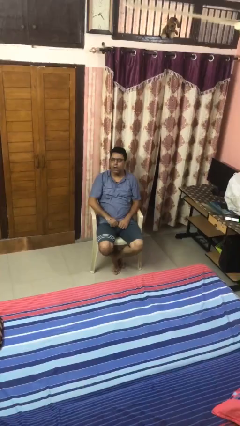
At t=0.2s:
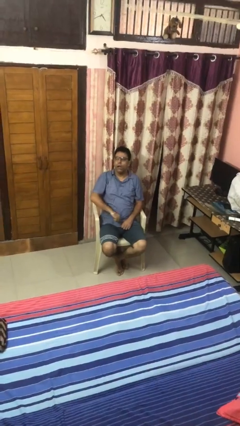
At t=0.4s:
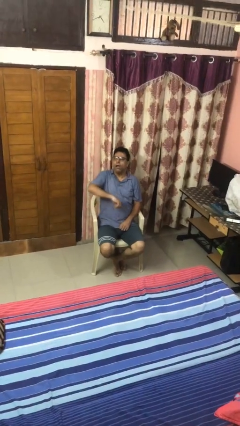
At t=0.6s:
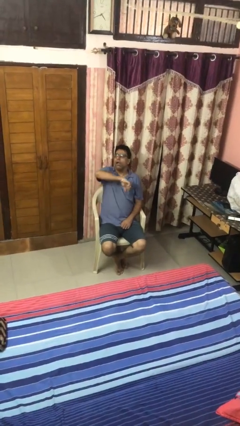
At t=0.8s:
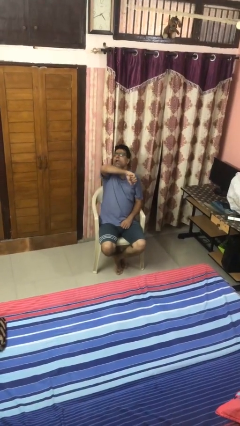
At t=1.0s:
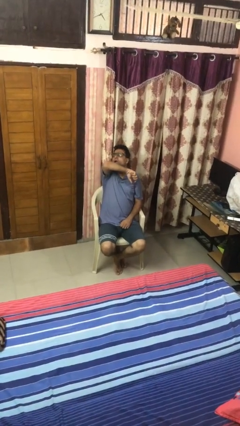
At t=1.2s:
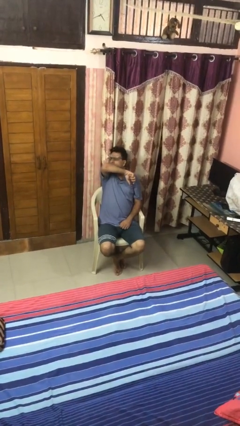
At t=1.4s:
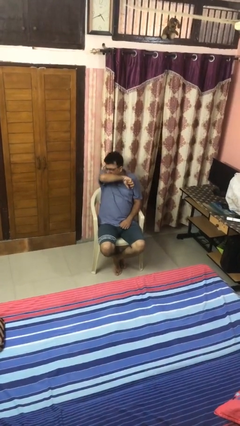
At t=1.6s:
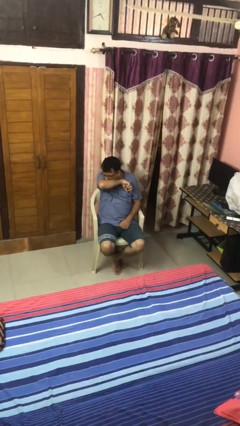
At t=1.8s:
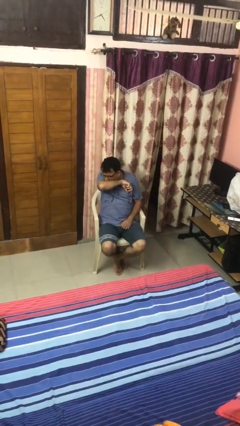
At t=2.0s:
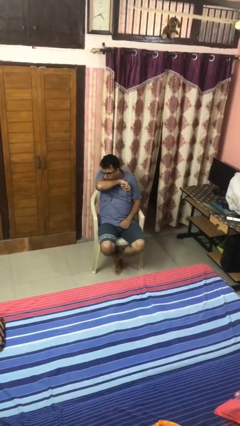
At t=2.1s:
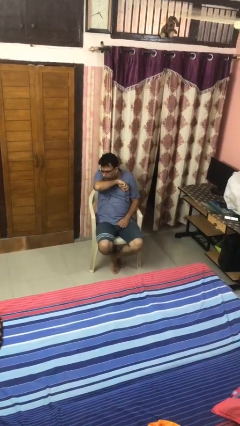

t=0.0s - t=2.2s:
person sneezes into arm

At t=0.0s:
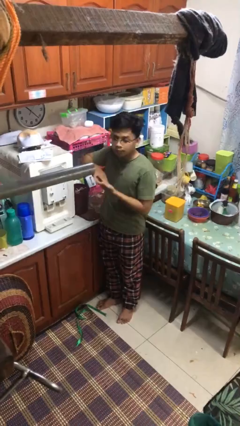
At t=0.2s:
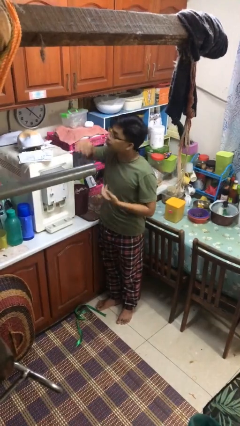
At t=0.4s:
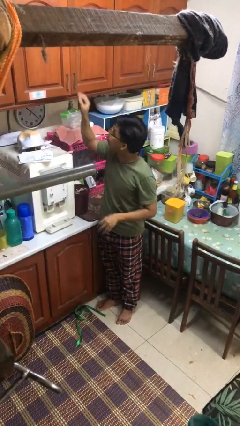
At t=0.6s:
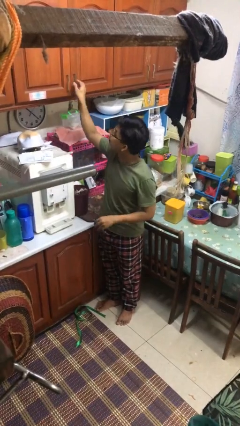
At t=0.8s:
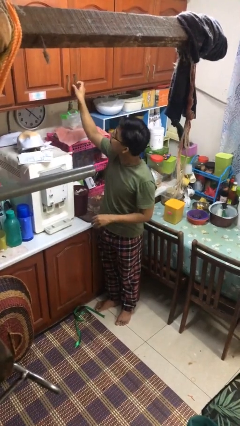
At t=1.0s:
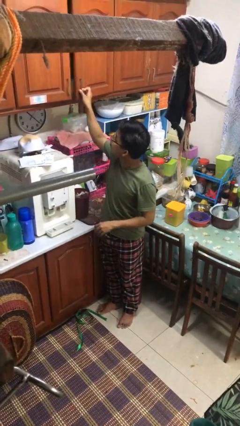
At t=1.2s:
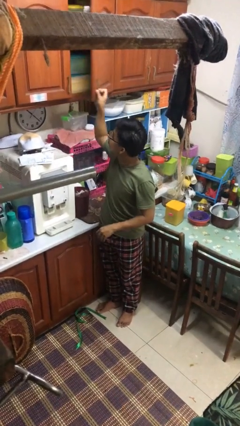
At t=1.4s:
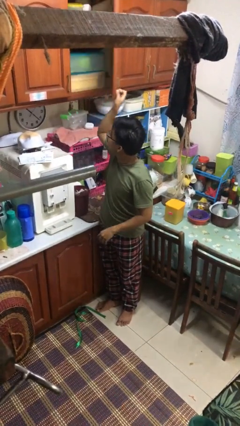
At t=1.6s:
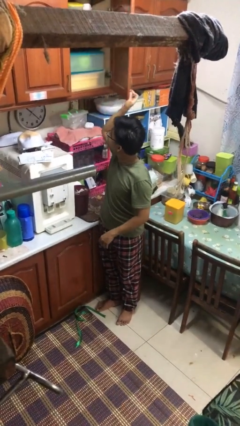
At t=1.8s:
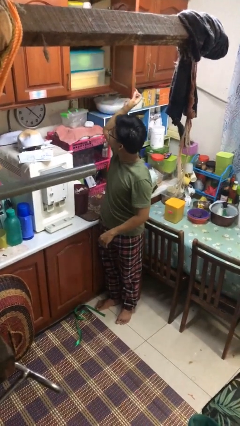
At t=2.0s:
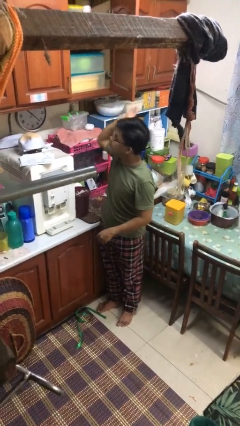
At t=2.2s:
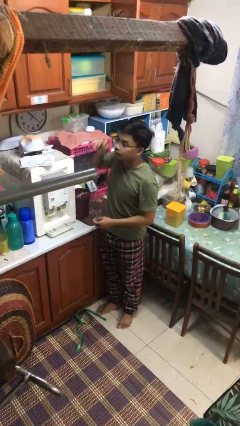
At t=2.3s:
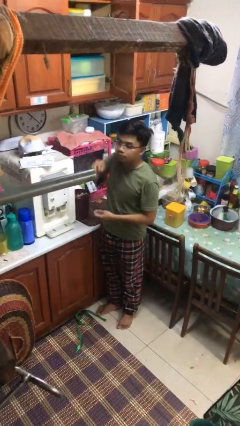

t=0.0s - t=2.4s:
person opens kitchen drawer

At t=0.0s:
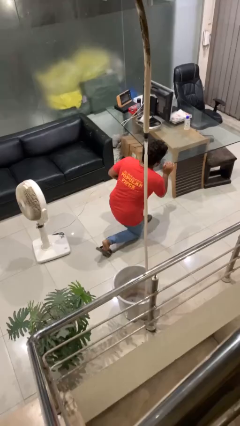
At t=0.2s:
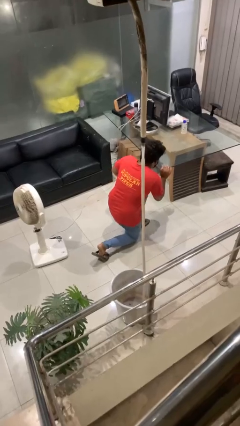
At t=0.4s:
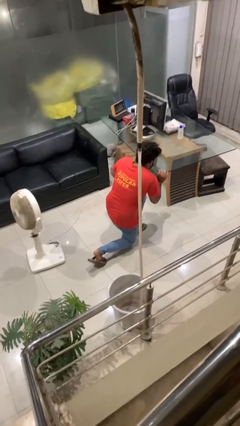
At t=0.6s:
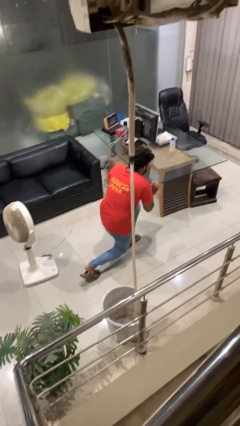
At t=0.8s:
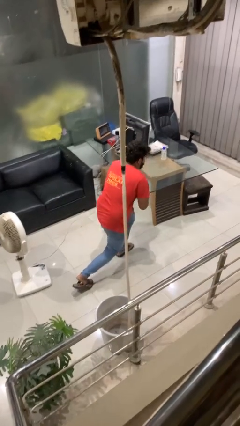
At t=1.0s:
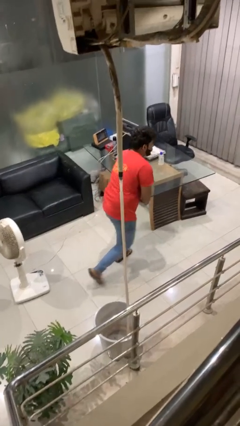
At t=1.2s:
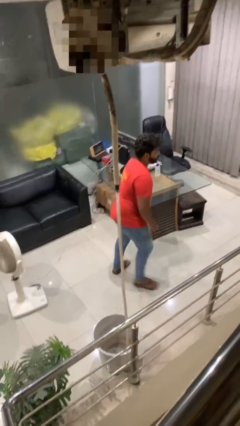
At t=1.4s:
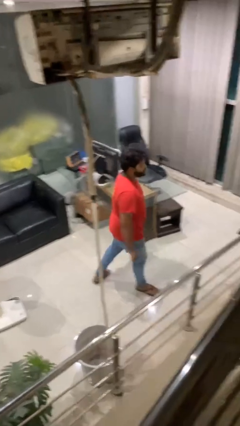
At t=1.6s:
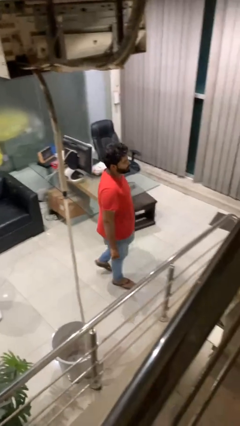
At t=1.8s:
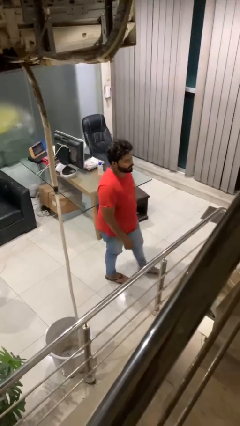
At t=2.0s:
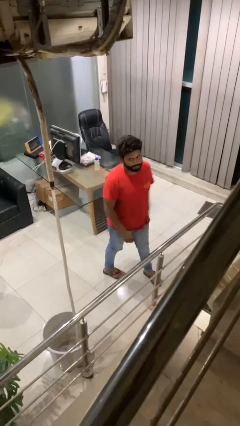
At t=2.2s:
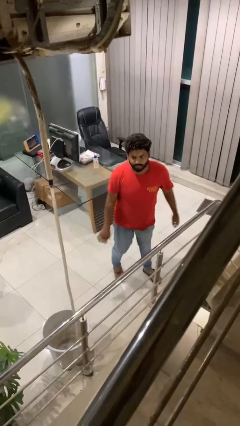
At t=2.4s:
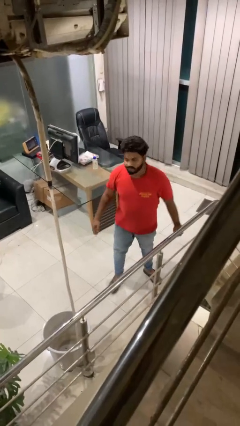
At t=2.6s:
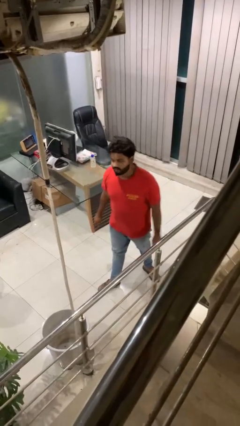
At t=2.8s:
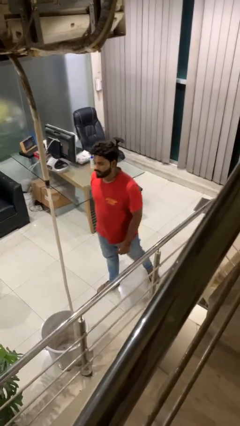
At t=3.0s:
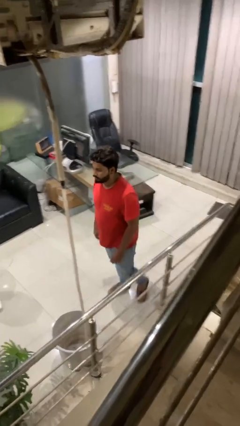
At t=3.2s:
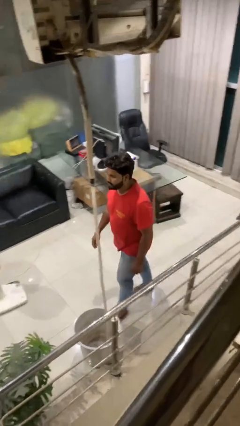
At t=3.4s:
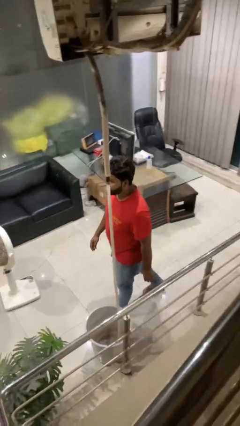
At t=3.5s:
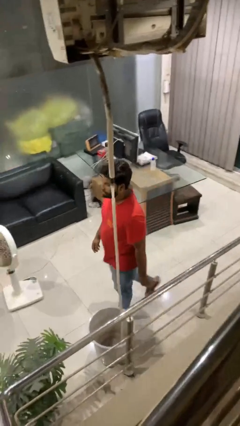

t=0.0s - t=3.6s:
person stands up from floor

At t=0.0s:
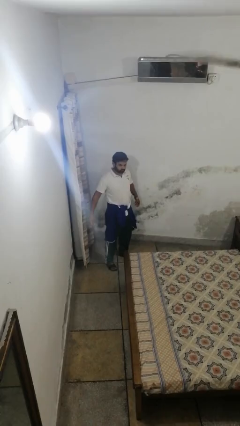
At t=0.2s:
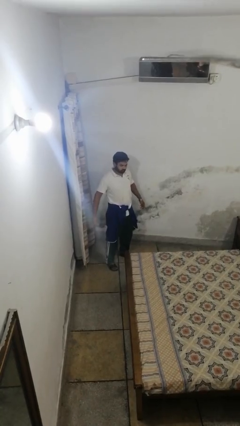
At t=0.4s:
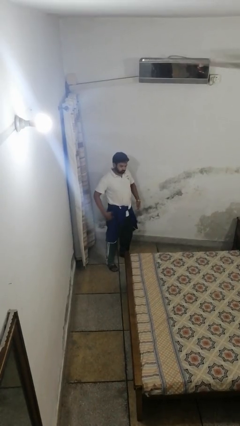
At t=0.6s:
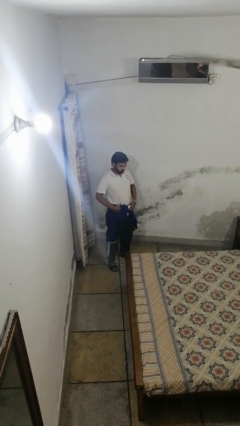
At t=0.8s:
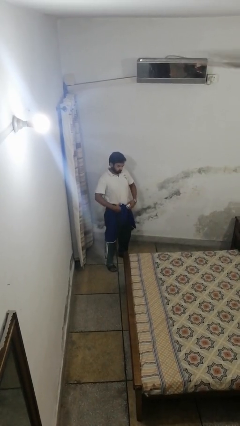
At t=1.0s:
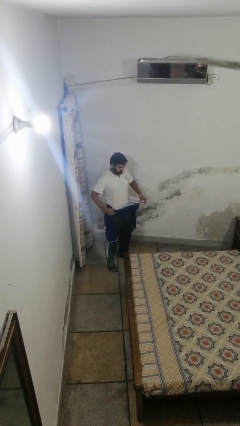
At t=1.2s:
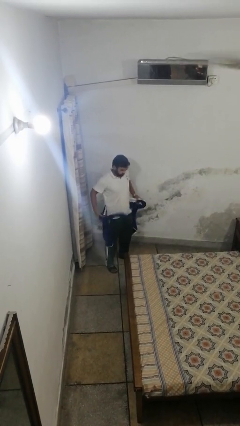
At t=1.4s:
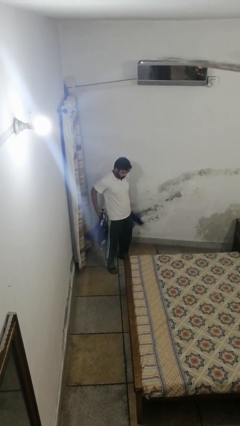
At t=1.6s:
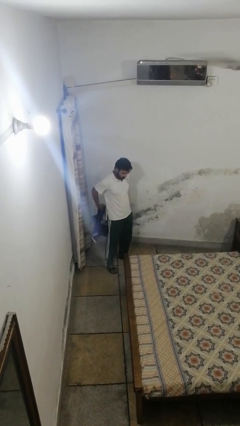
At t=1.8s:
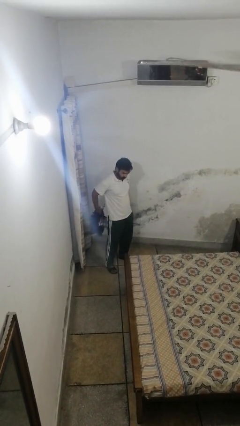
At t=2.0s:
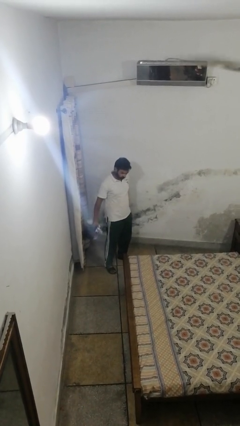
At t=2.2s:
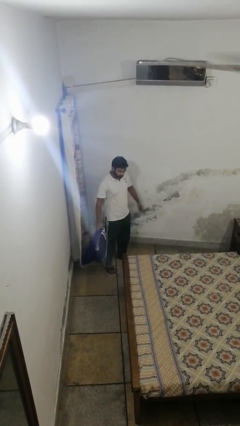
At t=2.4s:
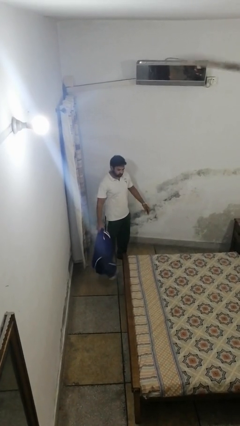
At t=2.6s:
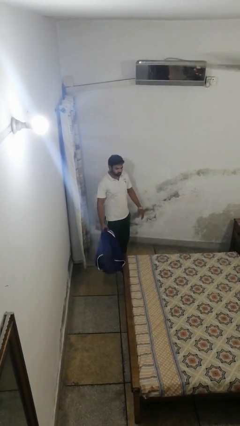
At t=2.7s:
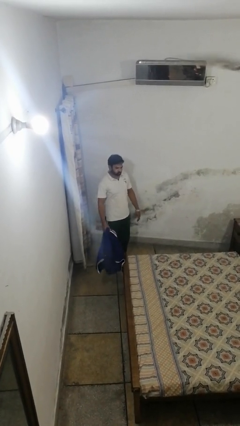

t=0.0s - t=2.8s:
person unties jacket around waist

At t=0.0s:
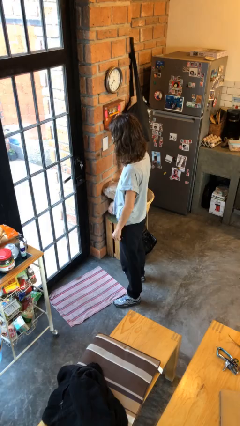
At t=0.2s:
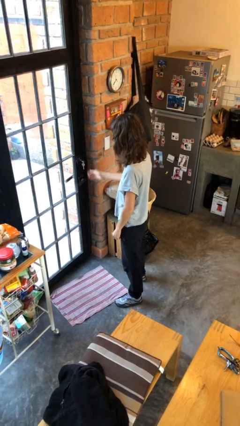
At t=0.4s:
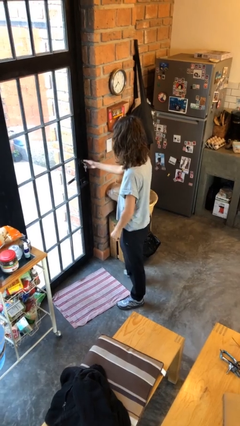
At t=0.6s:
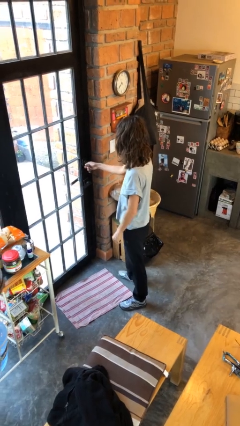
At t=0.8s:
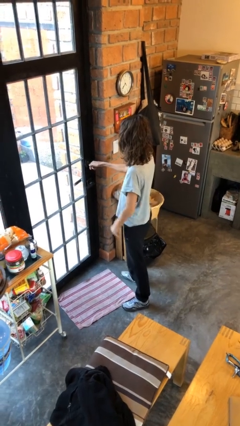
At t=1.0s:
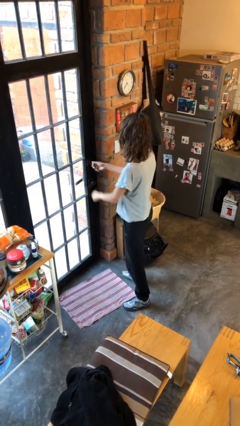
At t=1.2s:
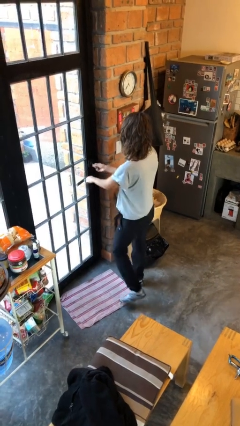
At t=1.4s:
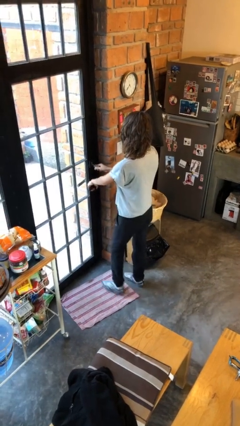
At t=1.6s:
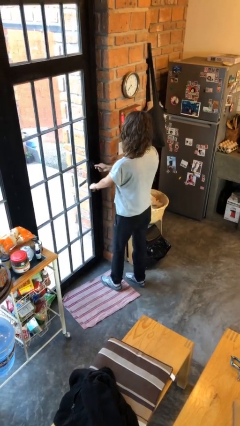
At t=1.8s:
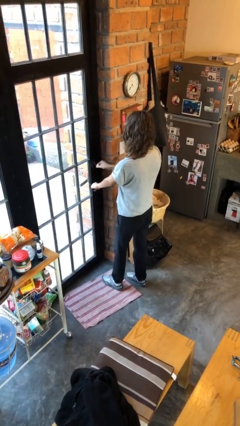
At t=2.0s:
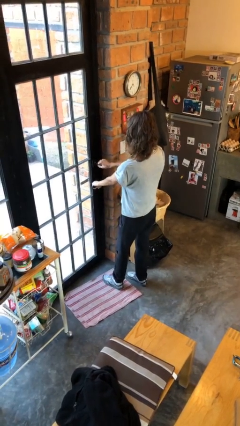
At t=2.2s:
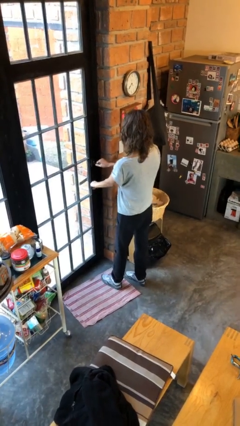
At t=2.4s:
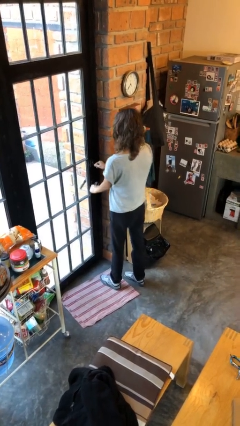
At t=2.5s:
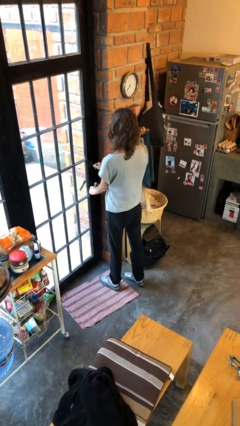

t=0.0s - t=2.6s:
person unlocks door with keys

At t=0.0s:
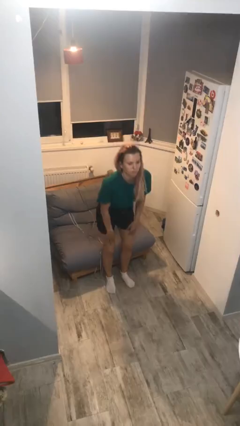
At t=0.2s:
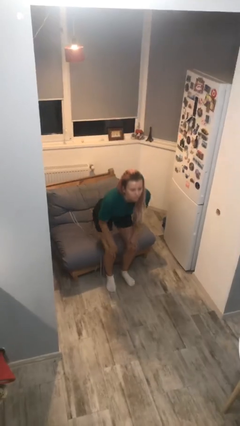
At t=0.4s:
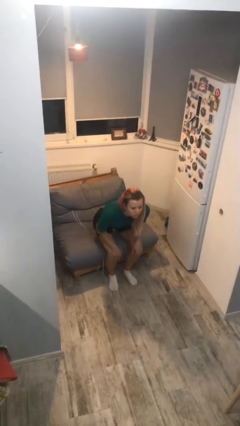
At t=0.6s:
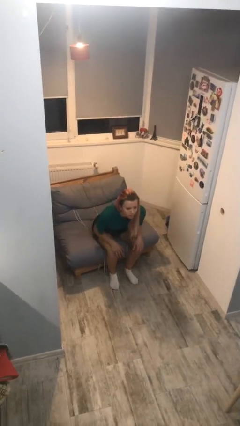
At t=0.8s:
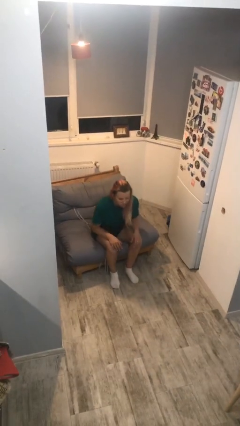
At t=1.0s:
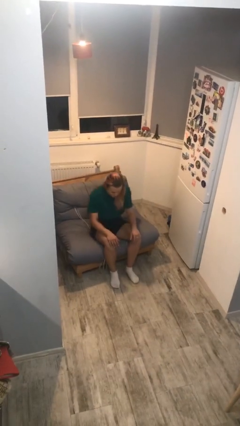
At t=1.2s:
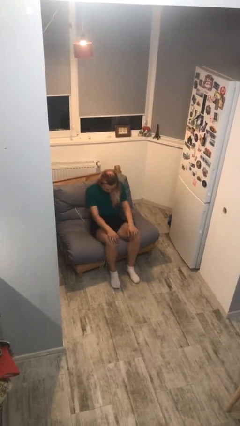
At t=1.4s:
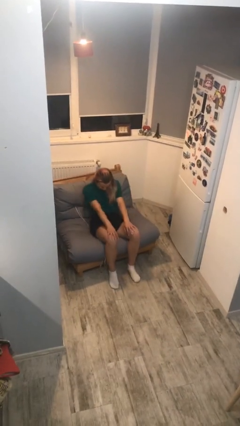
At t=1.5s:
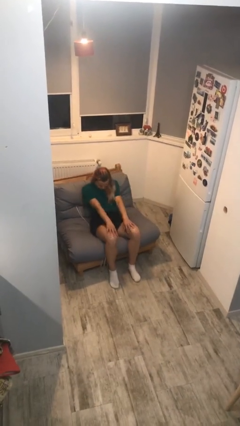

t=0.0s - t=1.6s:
person lies down on couch

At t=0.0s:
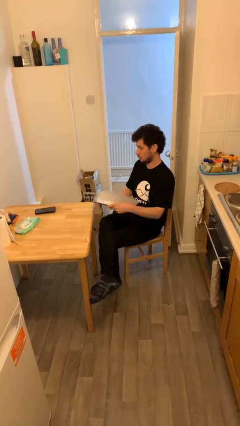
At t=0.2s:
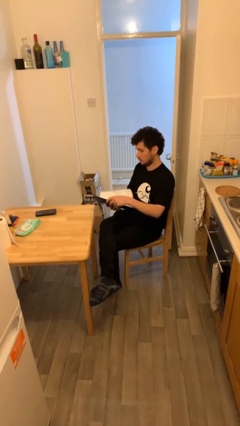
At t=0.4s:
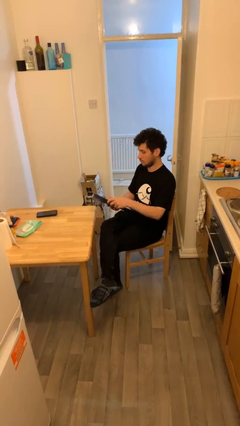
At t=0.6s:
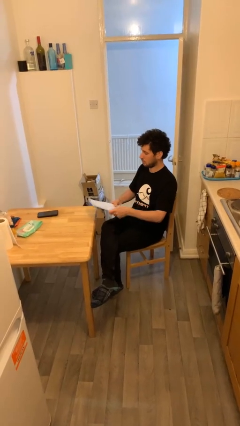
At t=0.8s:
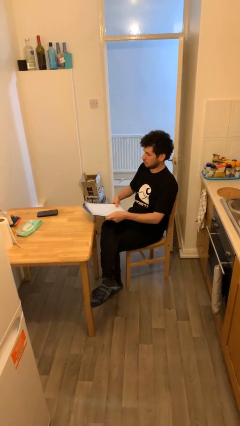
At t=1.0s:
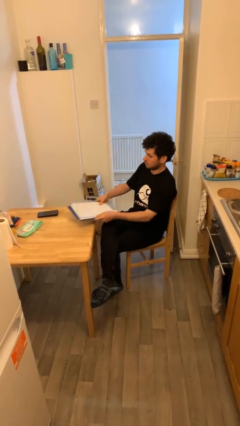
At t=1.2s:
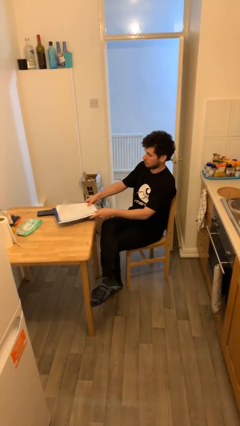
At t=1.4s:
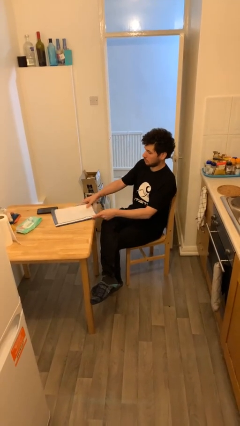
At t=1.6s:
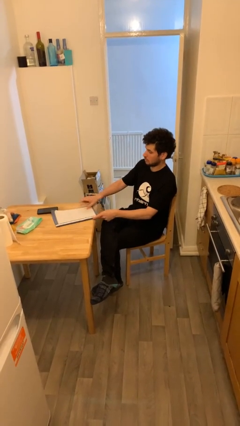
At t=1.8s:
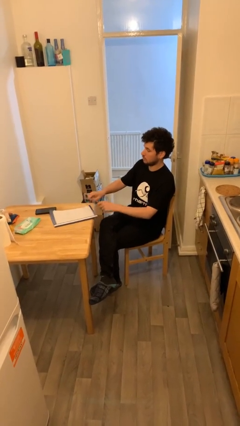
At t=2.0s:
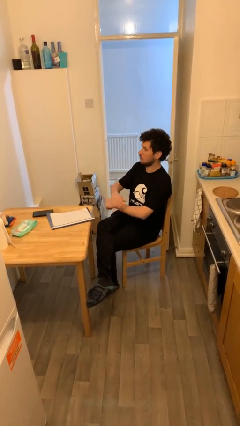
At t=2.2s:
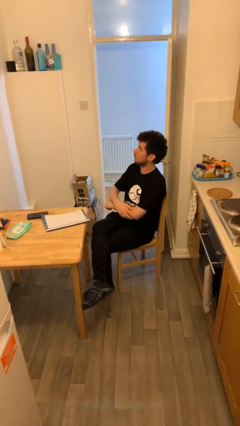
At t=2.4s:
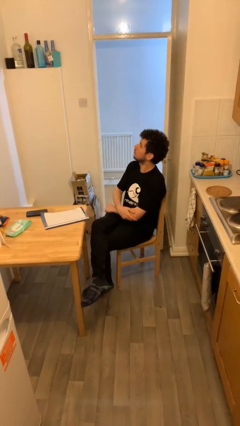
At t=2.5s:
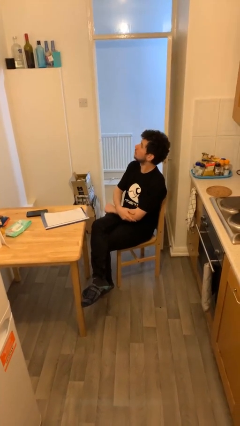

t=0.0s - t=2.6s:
person puts down object on table
